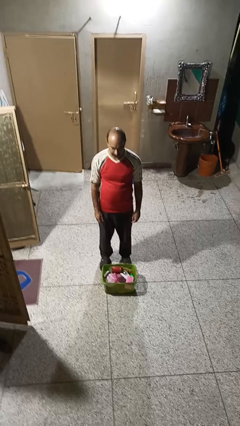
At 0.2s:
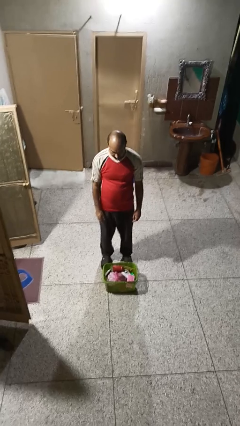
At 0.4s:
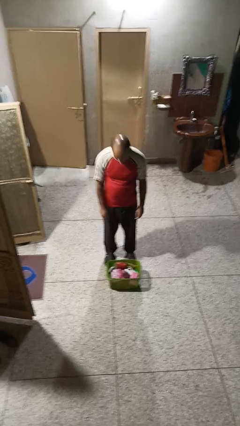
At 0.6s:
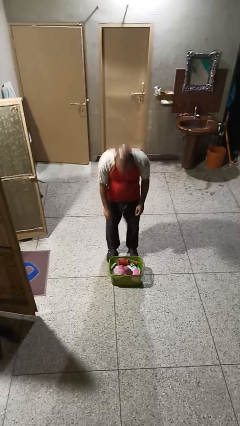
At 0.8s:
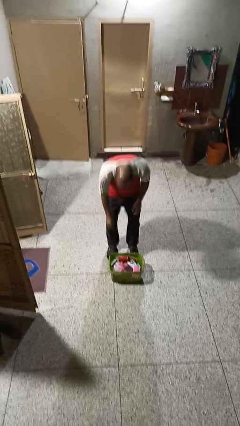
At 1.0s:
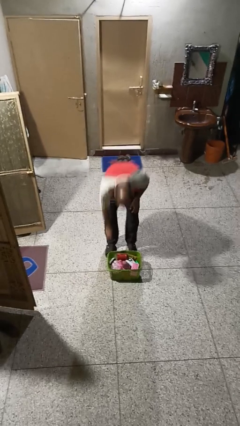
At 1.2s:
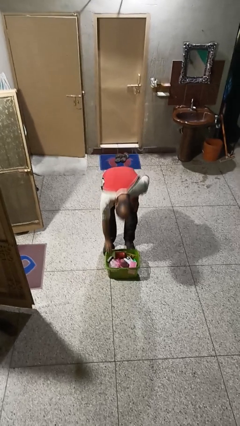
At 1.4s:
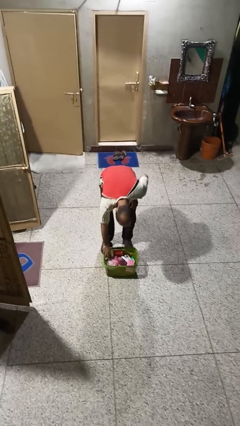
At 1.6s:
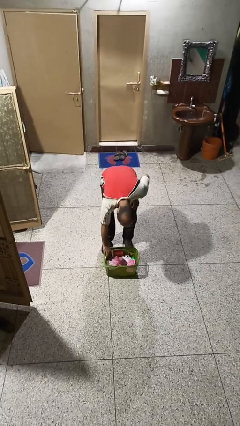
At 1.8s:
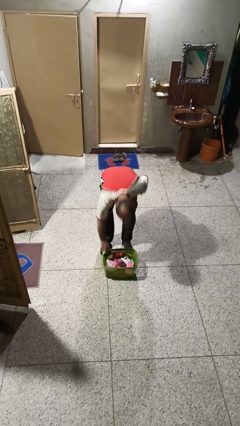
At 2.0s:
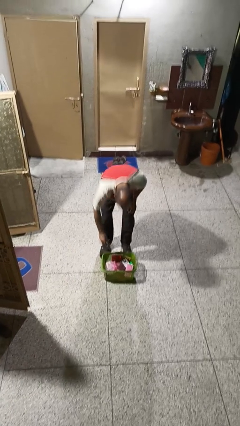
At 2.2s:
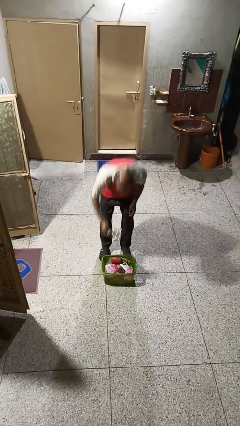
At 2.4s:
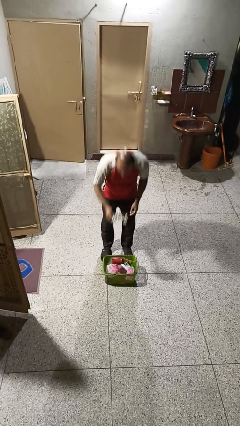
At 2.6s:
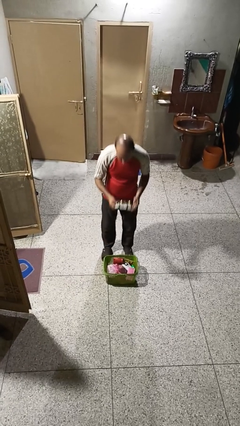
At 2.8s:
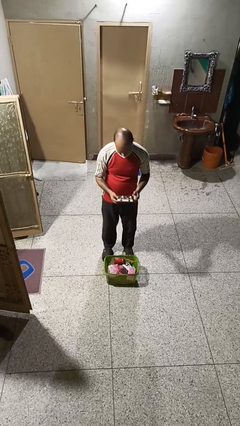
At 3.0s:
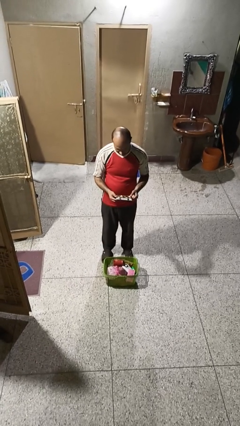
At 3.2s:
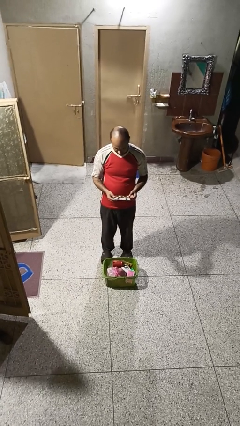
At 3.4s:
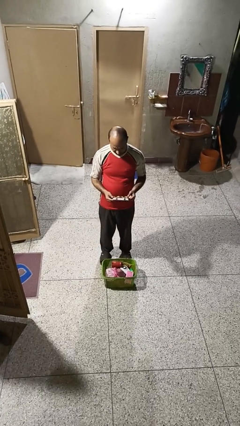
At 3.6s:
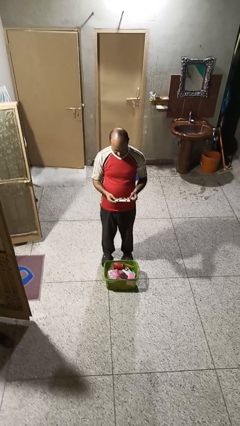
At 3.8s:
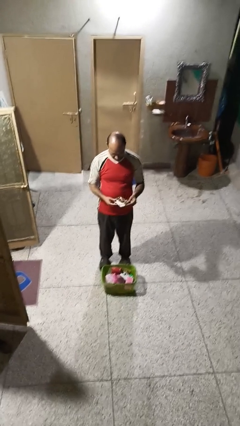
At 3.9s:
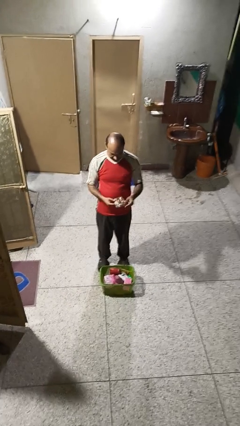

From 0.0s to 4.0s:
person takes object from basket

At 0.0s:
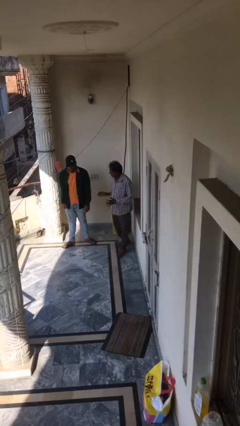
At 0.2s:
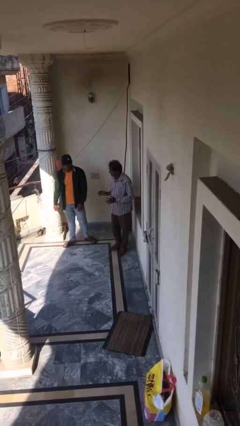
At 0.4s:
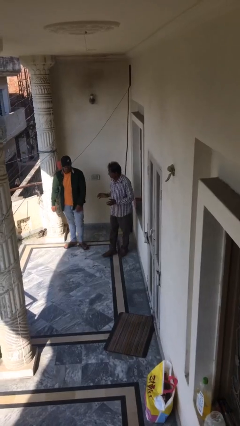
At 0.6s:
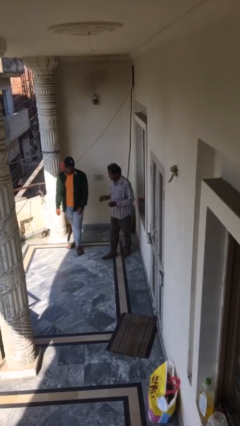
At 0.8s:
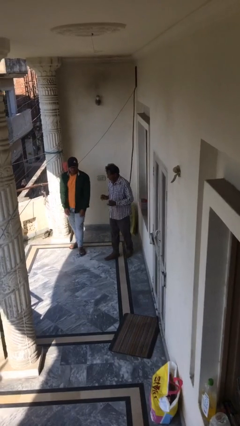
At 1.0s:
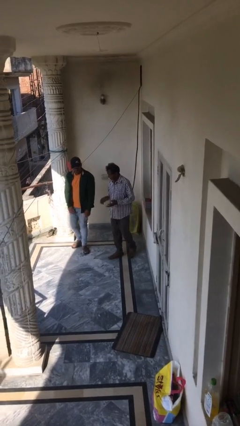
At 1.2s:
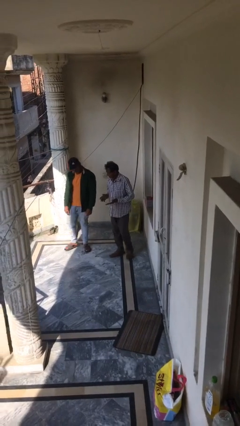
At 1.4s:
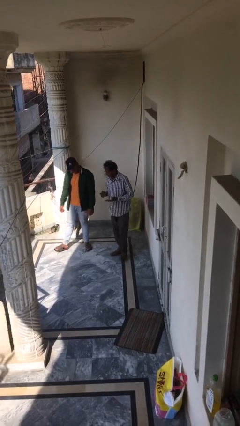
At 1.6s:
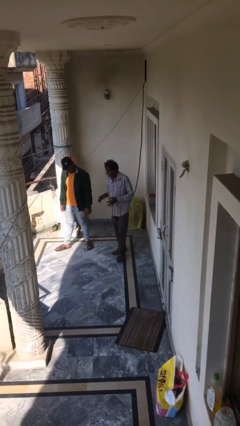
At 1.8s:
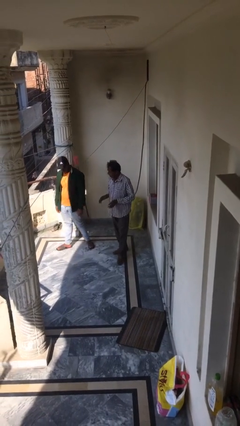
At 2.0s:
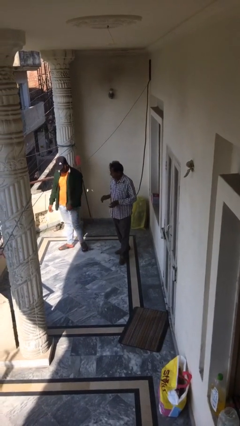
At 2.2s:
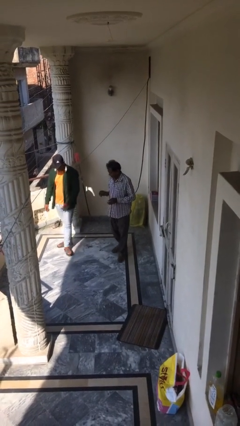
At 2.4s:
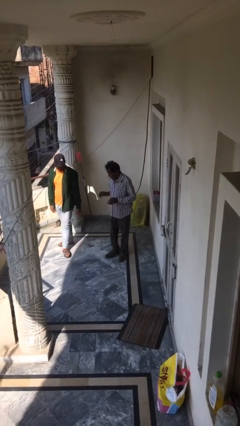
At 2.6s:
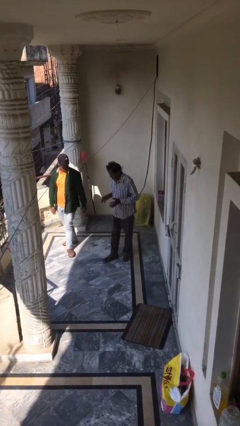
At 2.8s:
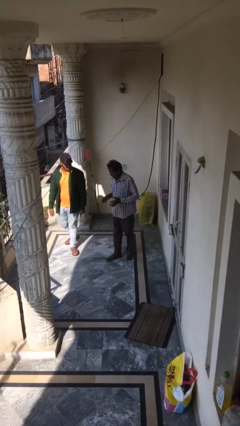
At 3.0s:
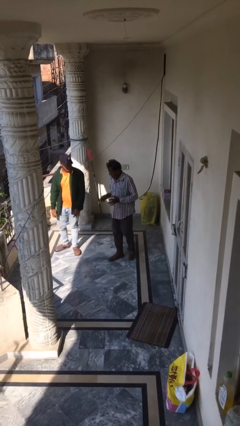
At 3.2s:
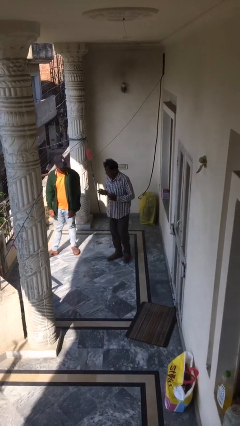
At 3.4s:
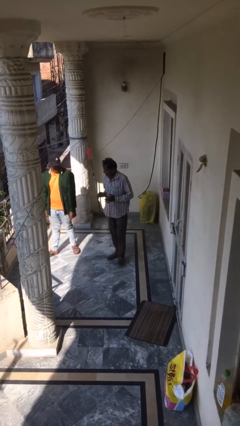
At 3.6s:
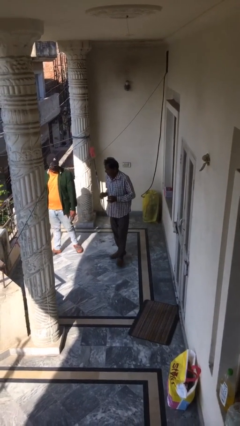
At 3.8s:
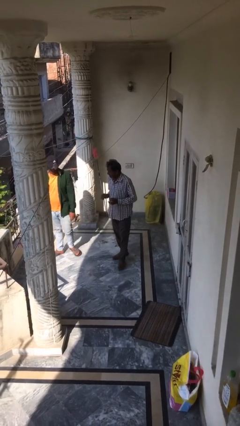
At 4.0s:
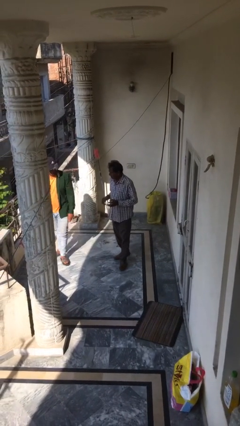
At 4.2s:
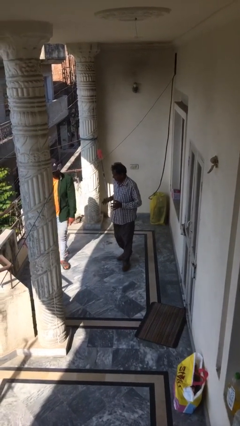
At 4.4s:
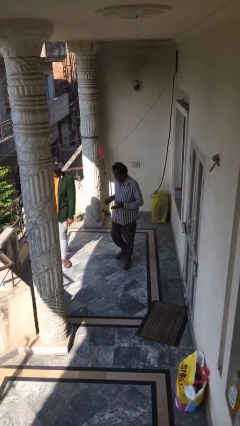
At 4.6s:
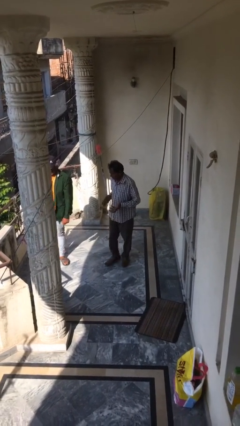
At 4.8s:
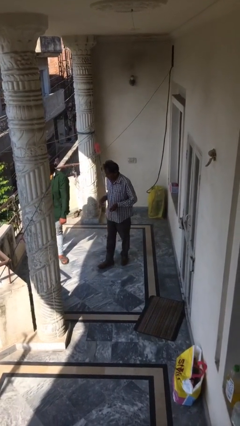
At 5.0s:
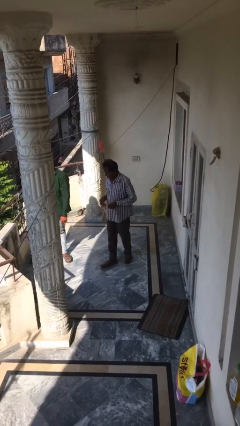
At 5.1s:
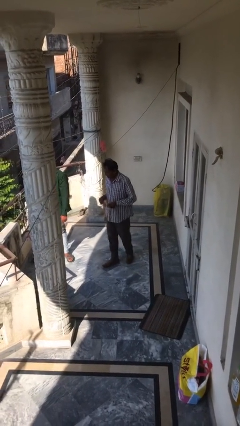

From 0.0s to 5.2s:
person talks to person

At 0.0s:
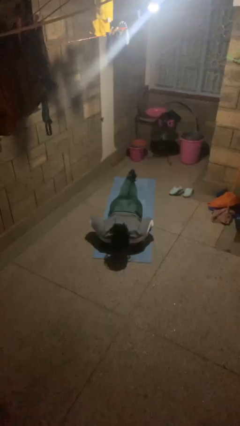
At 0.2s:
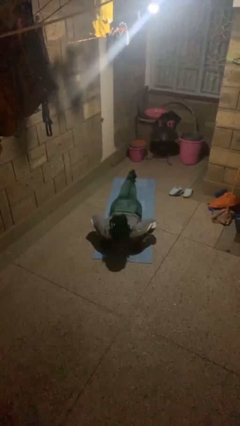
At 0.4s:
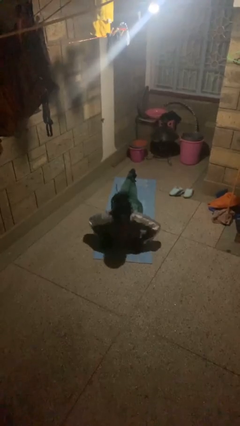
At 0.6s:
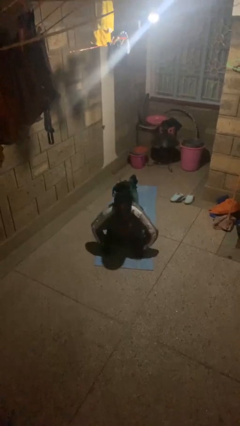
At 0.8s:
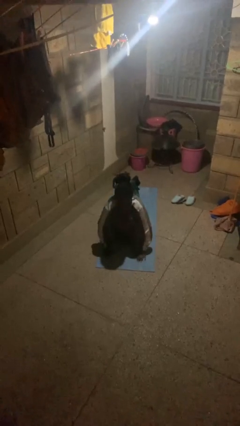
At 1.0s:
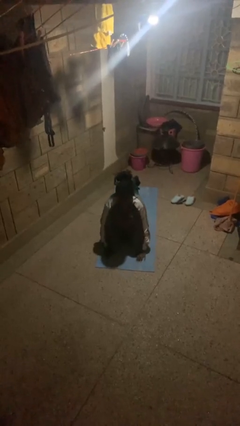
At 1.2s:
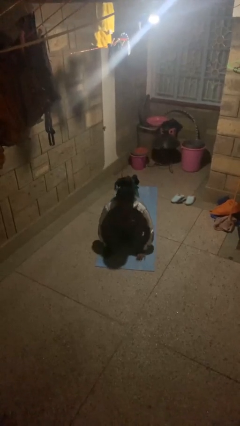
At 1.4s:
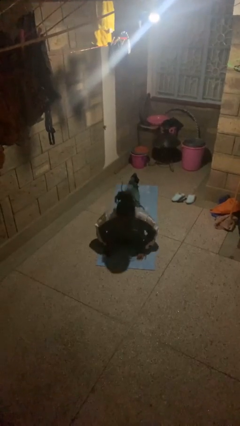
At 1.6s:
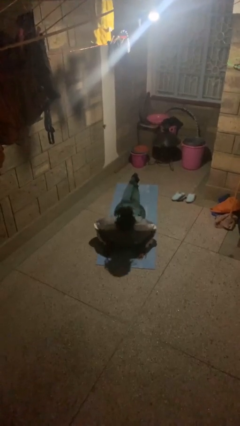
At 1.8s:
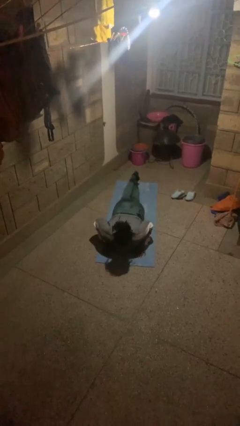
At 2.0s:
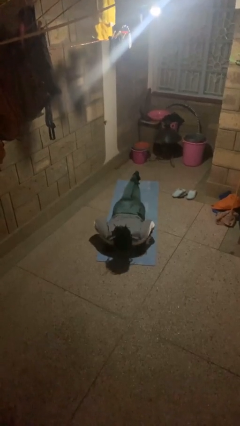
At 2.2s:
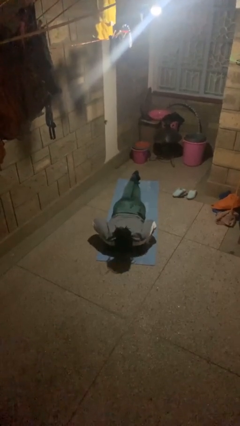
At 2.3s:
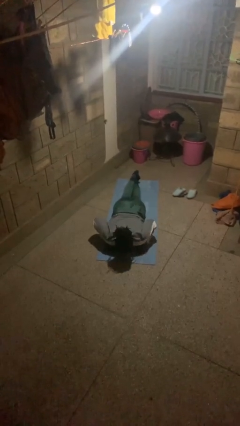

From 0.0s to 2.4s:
person exercises with pushup

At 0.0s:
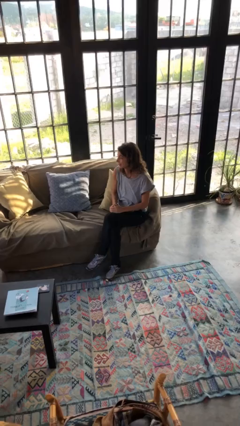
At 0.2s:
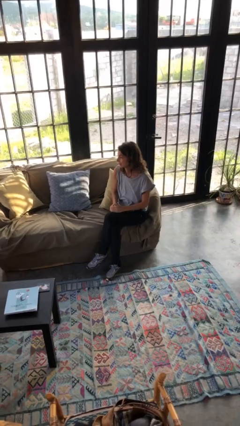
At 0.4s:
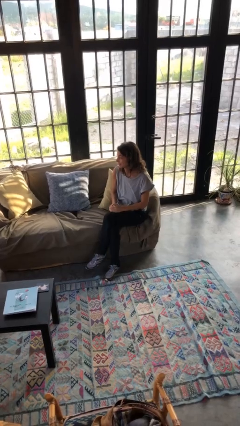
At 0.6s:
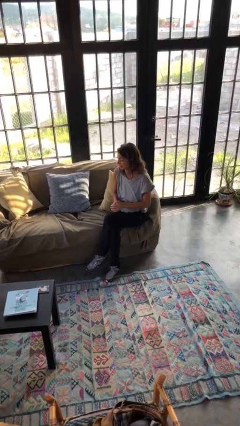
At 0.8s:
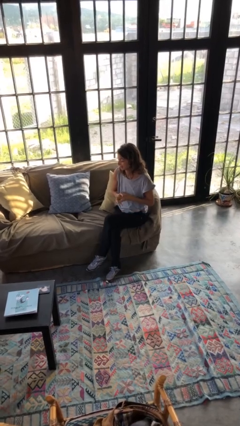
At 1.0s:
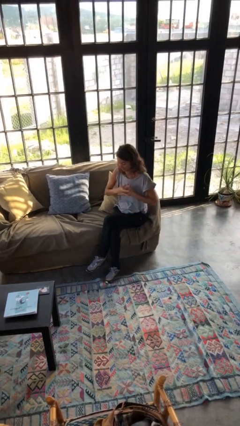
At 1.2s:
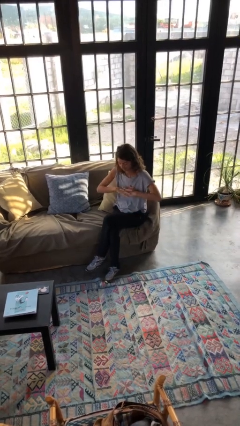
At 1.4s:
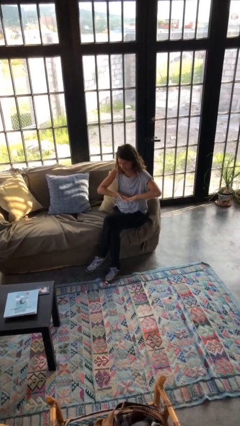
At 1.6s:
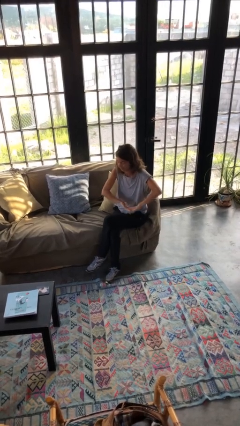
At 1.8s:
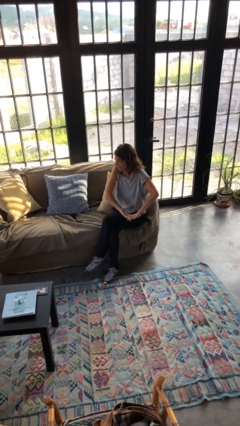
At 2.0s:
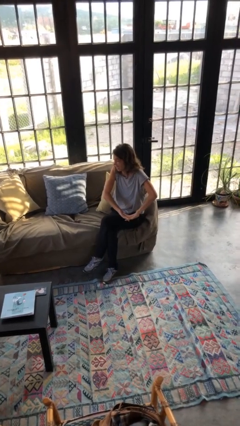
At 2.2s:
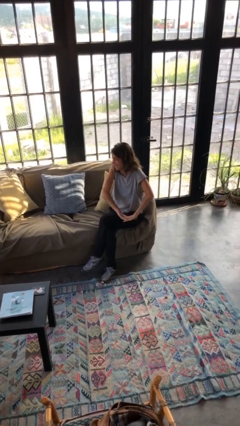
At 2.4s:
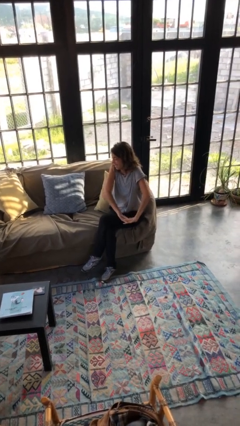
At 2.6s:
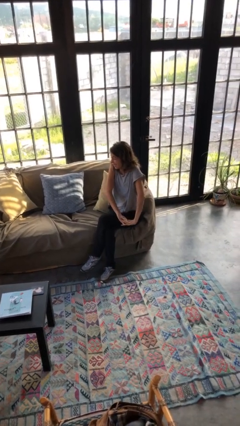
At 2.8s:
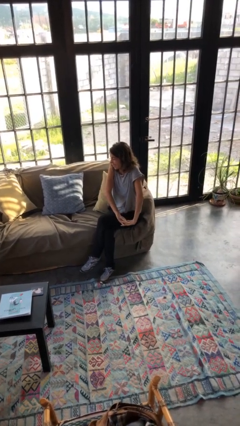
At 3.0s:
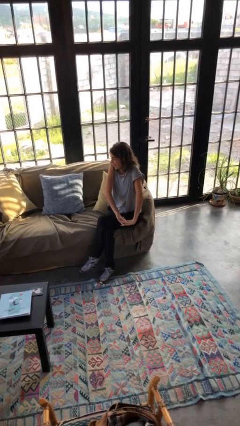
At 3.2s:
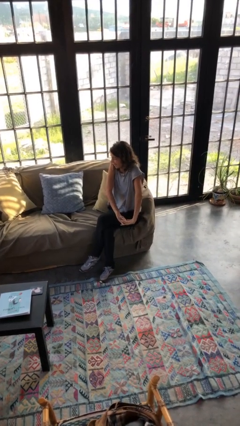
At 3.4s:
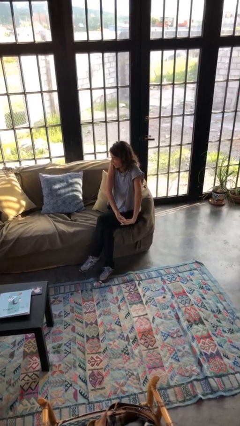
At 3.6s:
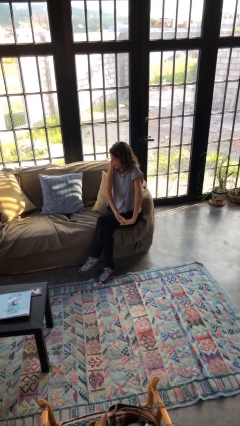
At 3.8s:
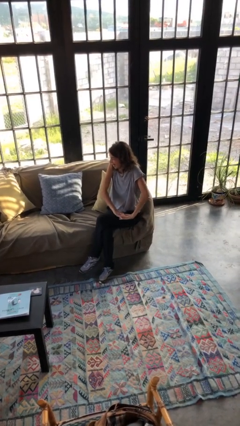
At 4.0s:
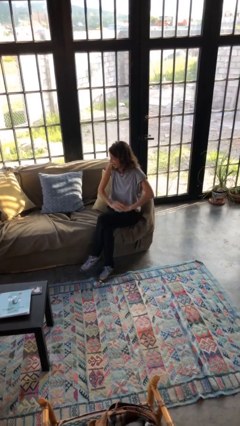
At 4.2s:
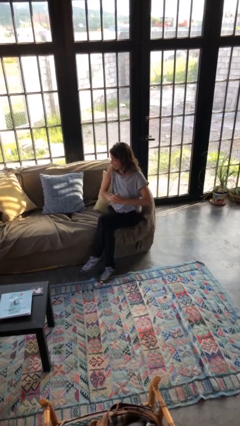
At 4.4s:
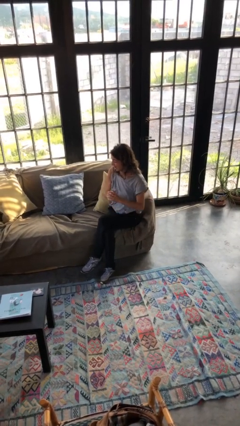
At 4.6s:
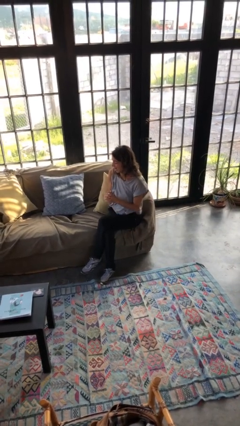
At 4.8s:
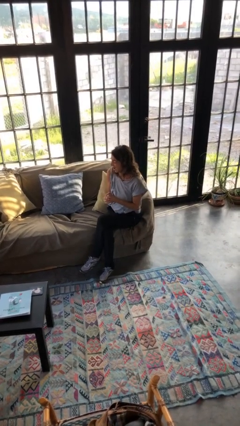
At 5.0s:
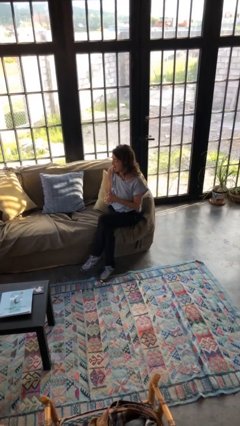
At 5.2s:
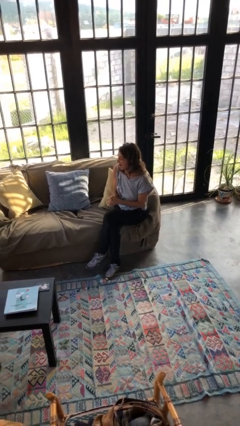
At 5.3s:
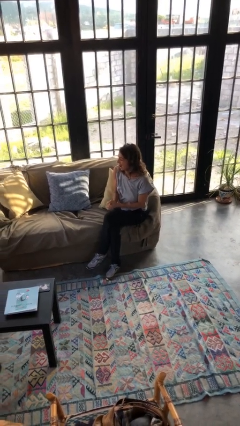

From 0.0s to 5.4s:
person cracks knuckles

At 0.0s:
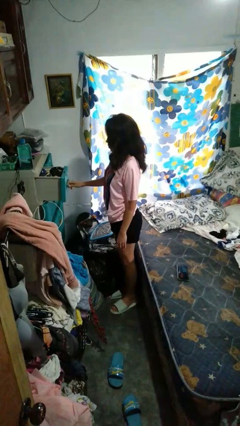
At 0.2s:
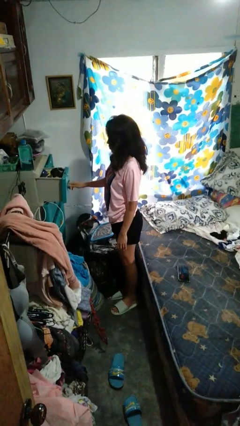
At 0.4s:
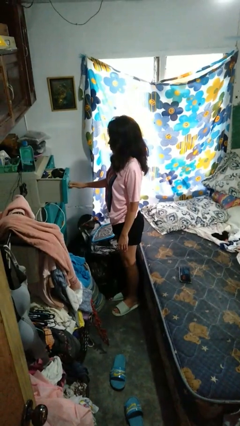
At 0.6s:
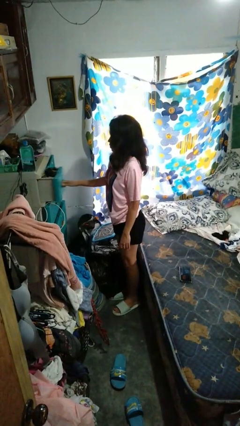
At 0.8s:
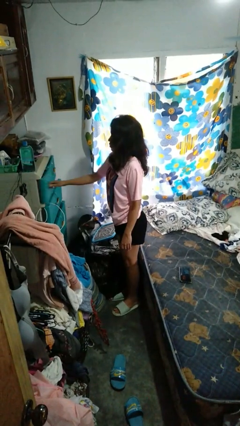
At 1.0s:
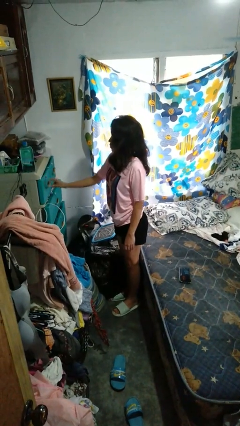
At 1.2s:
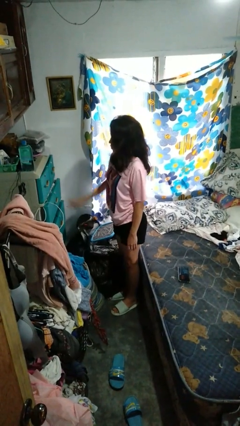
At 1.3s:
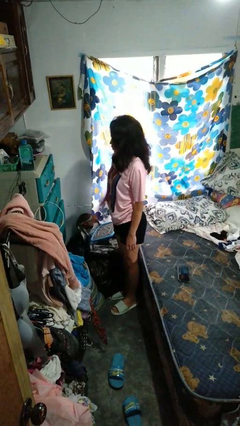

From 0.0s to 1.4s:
person closes dresser drawer
